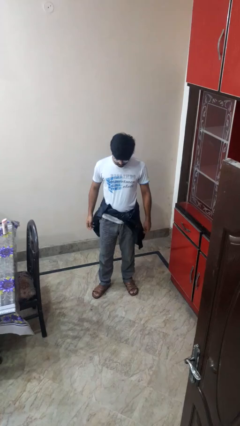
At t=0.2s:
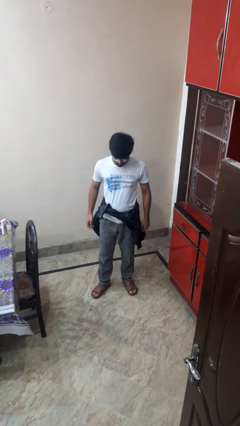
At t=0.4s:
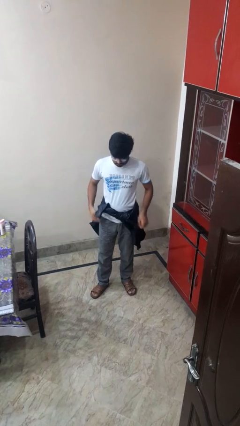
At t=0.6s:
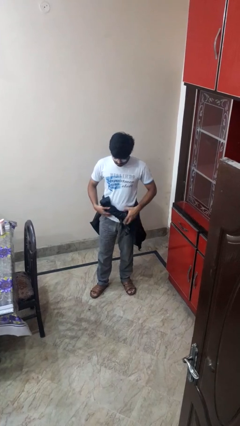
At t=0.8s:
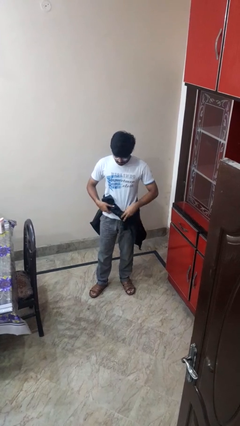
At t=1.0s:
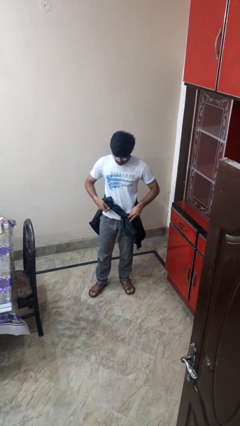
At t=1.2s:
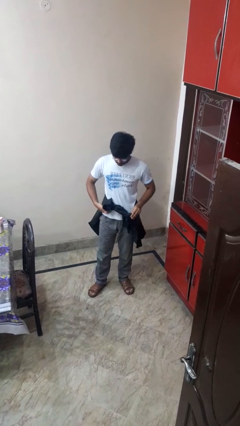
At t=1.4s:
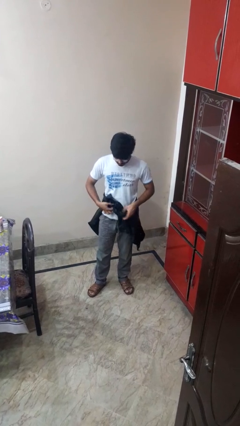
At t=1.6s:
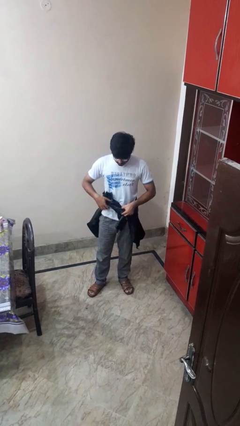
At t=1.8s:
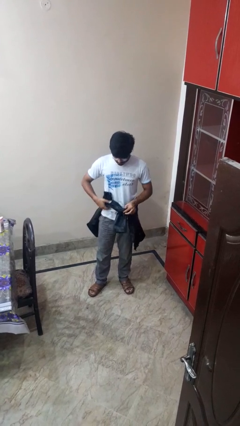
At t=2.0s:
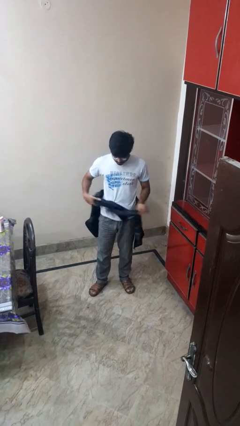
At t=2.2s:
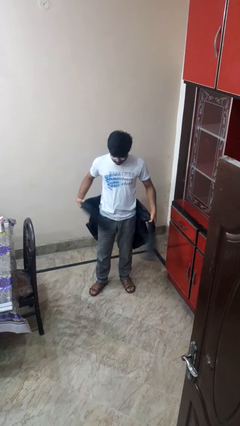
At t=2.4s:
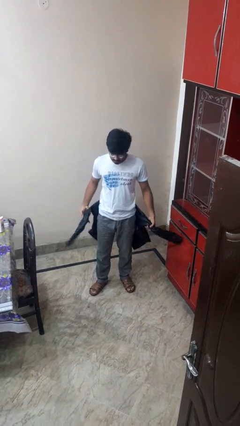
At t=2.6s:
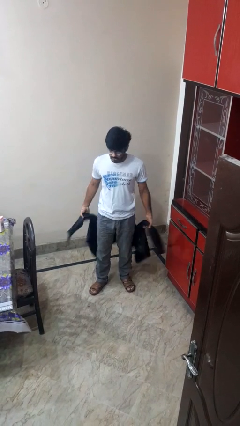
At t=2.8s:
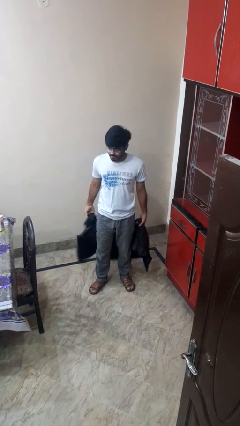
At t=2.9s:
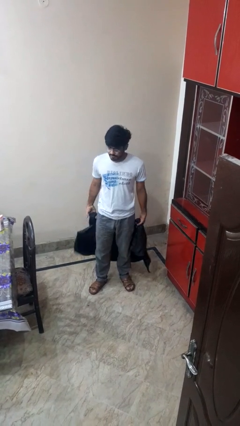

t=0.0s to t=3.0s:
person unties jacket around waist

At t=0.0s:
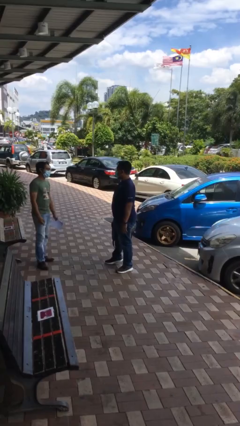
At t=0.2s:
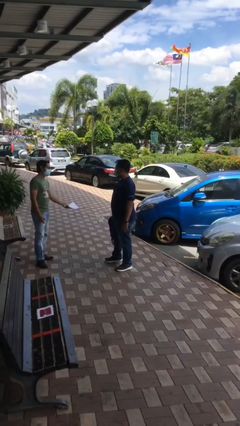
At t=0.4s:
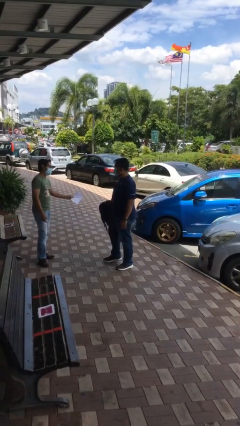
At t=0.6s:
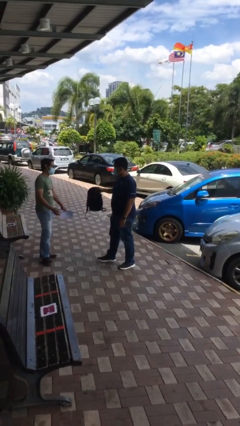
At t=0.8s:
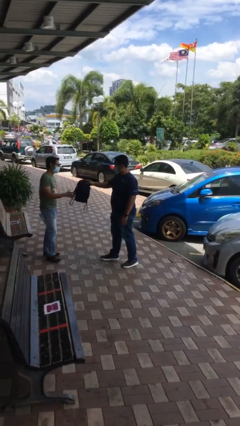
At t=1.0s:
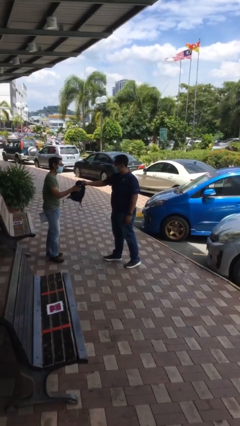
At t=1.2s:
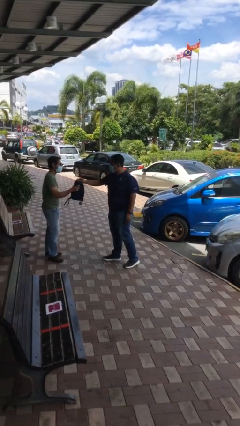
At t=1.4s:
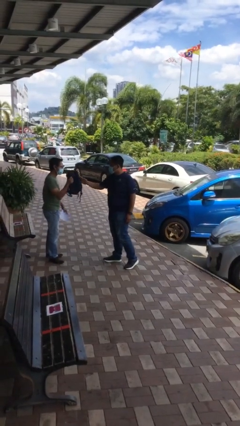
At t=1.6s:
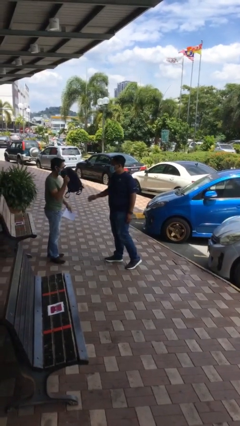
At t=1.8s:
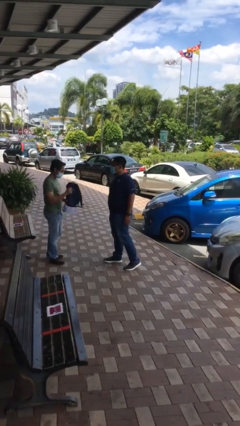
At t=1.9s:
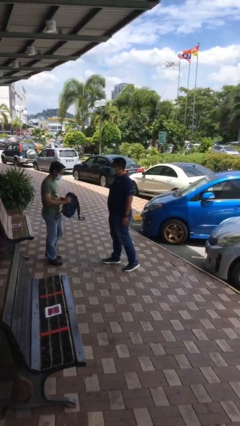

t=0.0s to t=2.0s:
person transfers object to person

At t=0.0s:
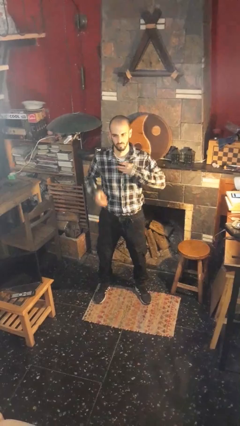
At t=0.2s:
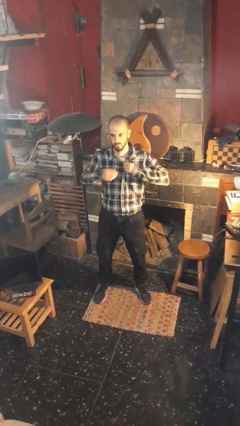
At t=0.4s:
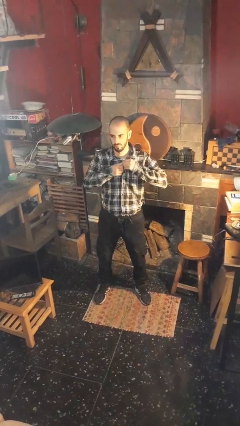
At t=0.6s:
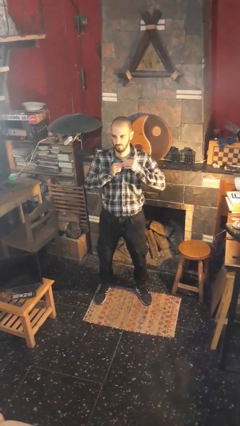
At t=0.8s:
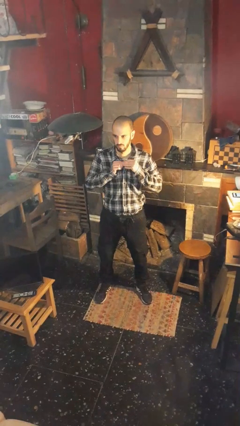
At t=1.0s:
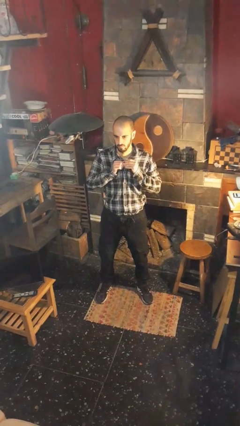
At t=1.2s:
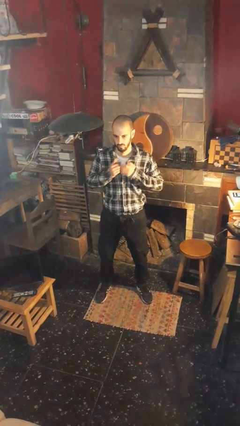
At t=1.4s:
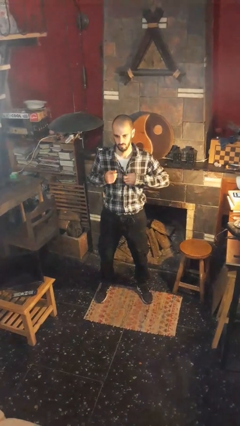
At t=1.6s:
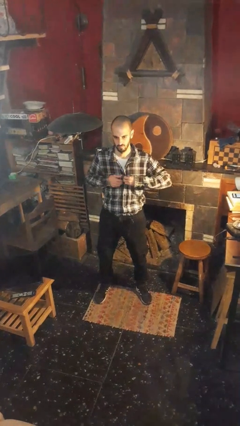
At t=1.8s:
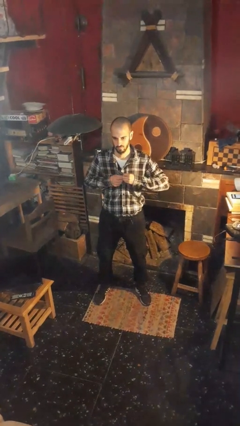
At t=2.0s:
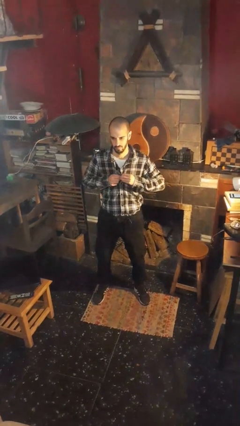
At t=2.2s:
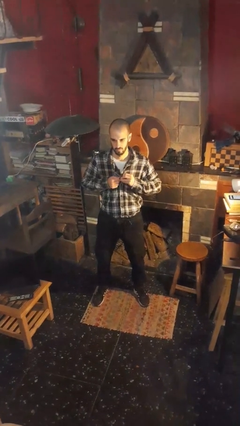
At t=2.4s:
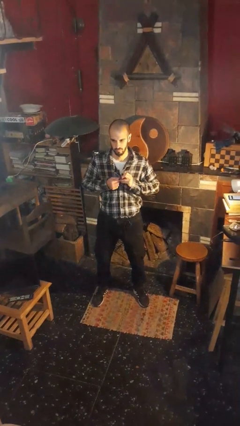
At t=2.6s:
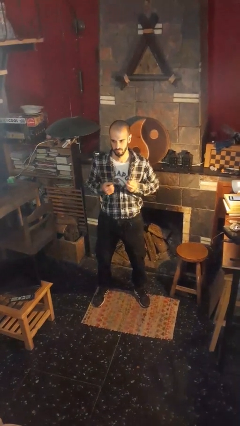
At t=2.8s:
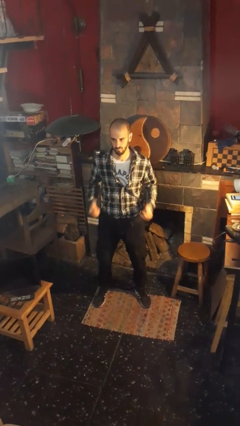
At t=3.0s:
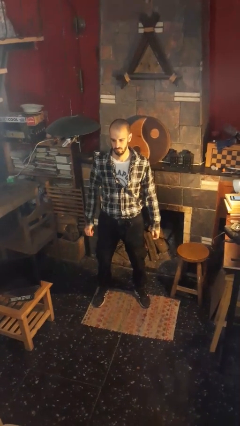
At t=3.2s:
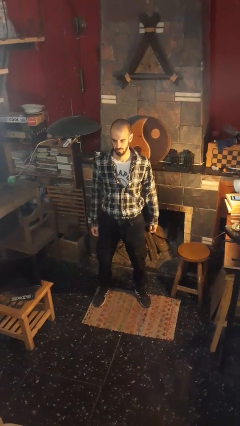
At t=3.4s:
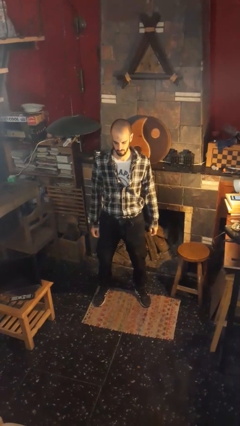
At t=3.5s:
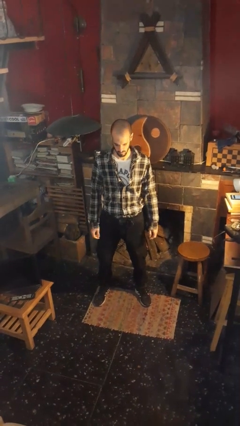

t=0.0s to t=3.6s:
person unbuttons shirt

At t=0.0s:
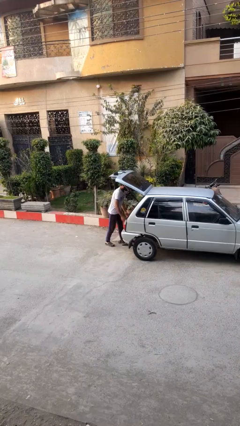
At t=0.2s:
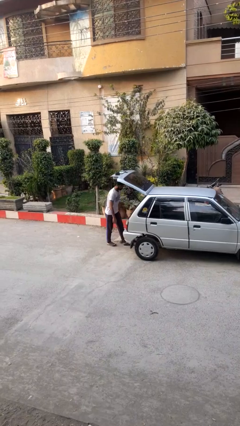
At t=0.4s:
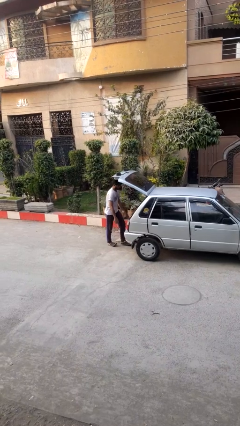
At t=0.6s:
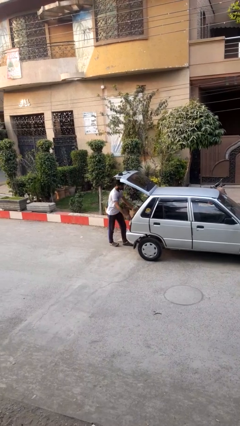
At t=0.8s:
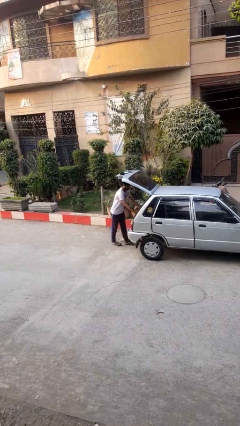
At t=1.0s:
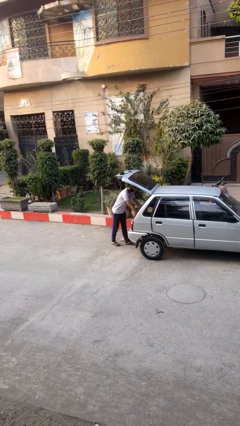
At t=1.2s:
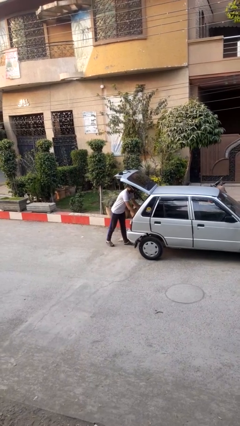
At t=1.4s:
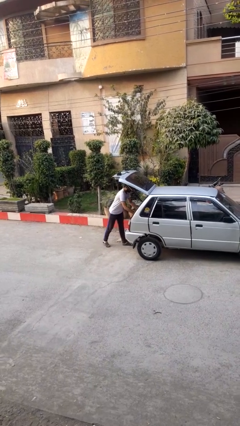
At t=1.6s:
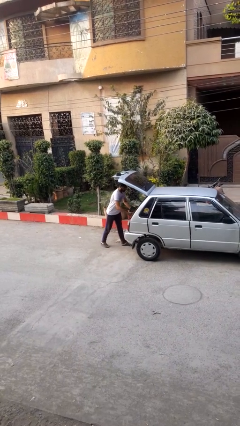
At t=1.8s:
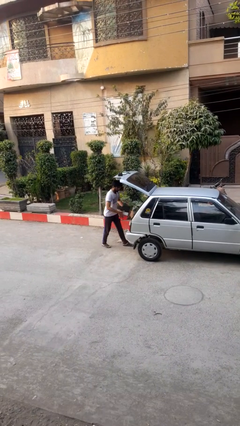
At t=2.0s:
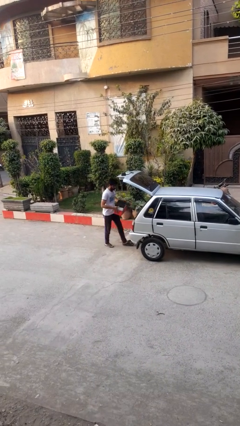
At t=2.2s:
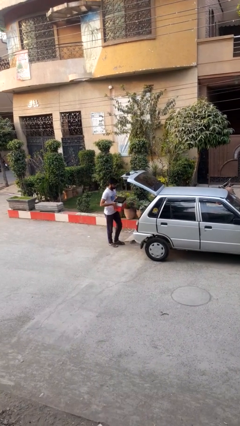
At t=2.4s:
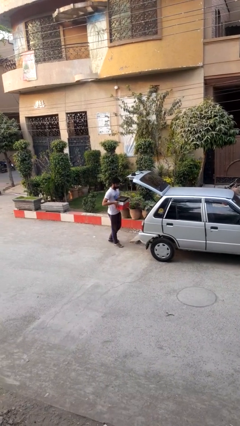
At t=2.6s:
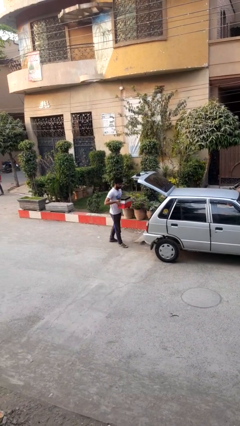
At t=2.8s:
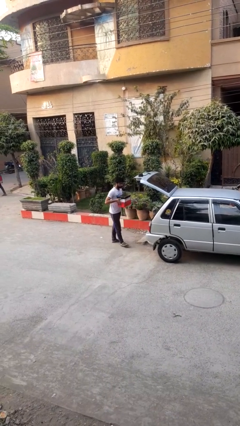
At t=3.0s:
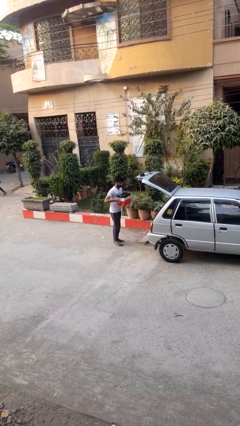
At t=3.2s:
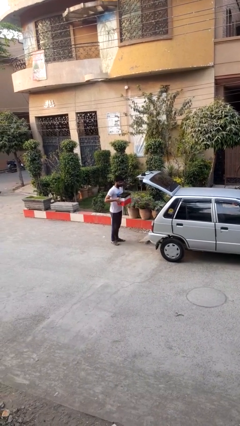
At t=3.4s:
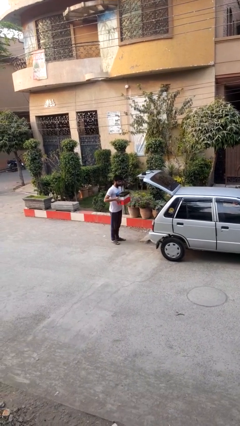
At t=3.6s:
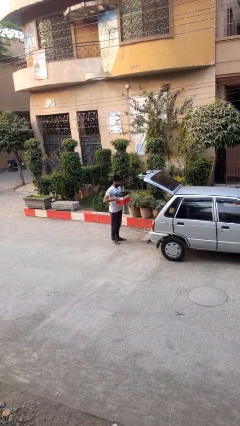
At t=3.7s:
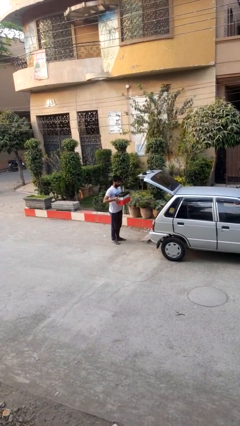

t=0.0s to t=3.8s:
person unloads car

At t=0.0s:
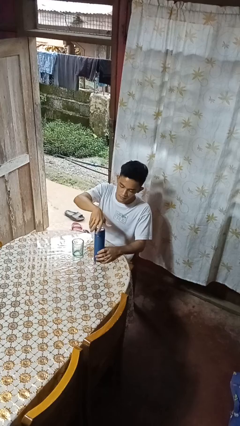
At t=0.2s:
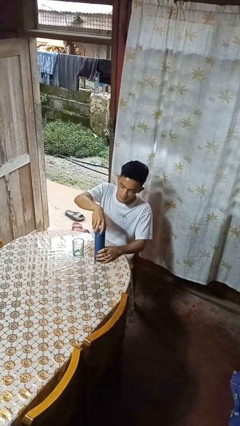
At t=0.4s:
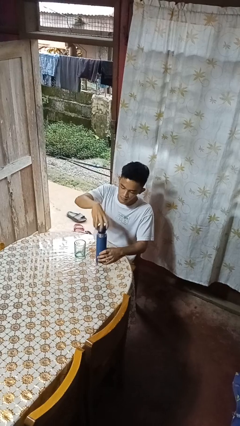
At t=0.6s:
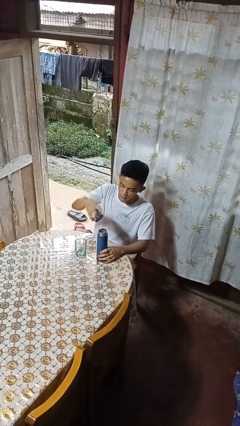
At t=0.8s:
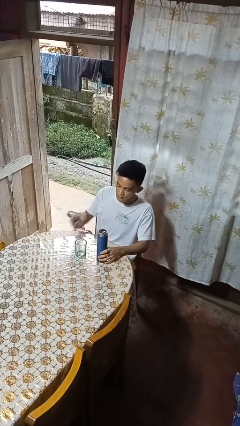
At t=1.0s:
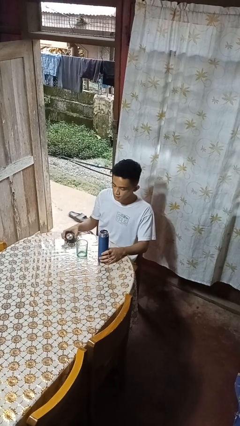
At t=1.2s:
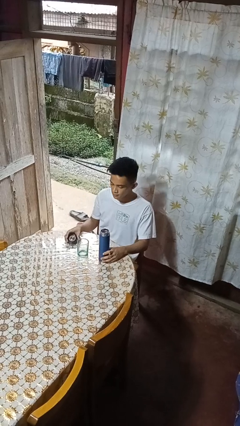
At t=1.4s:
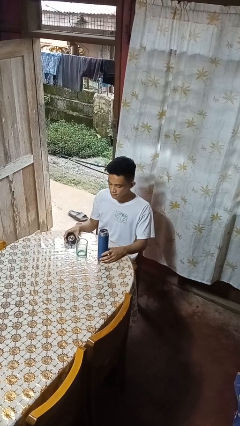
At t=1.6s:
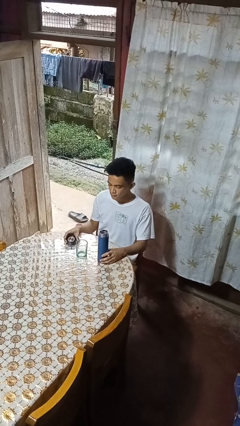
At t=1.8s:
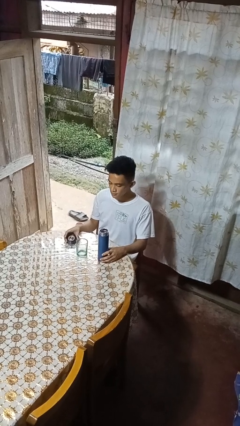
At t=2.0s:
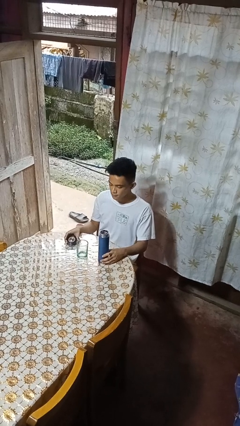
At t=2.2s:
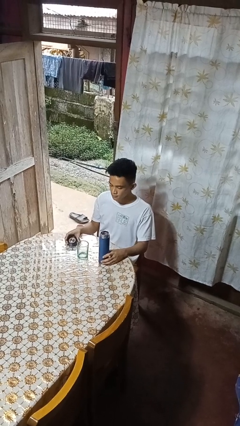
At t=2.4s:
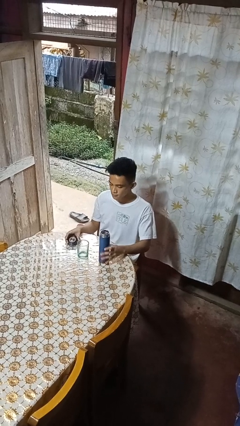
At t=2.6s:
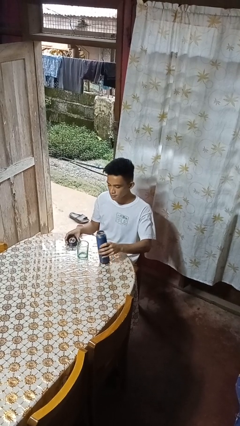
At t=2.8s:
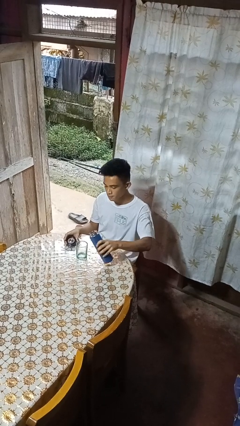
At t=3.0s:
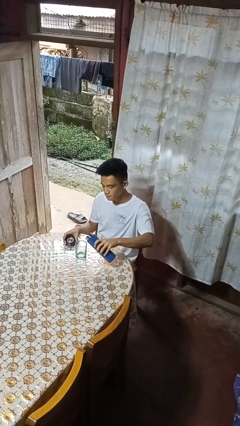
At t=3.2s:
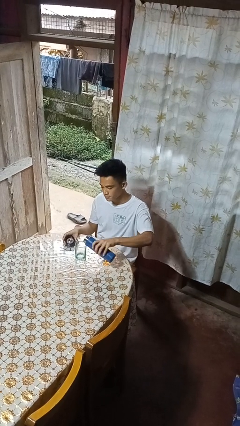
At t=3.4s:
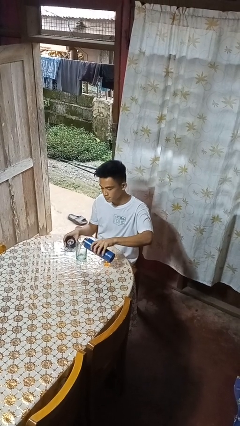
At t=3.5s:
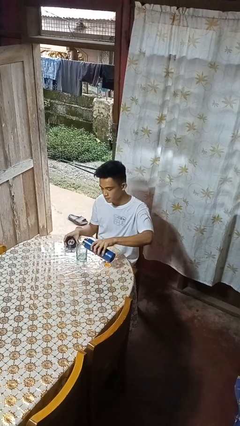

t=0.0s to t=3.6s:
person unscrews lid from bottle

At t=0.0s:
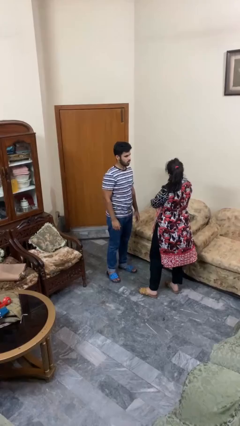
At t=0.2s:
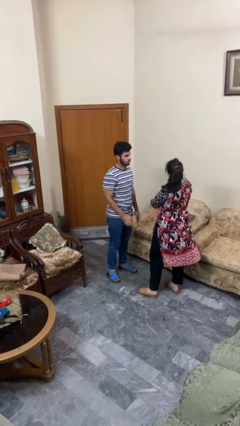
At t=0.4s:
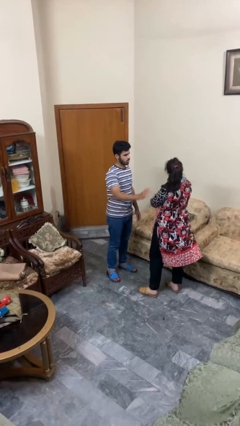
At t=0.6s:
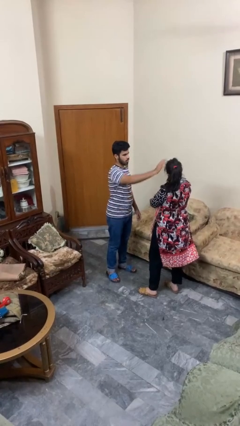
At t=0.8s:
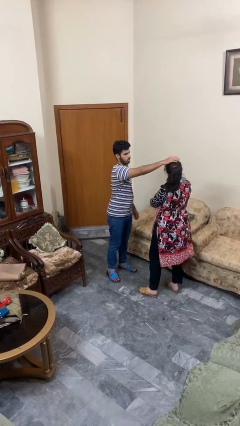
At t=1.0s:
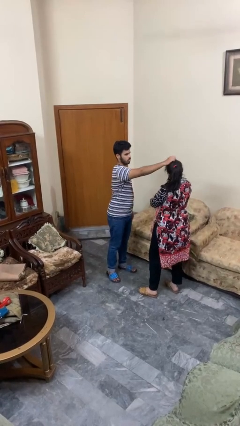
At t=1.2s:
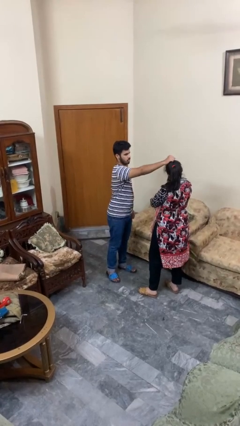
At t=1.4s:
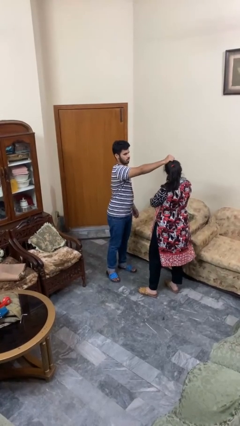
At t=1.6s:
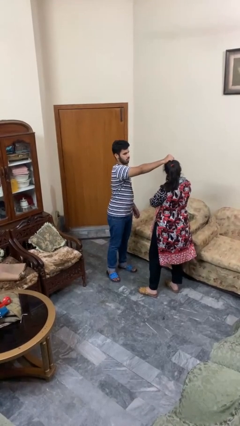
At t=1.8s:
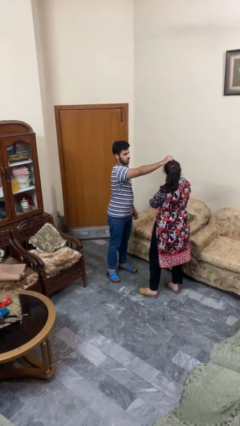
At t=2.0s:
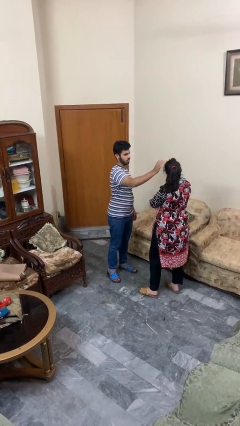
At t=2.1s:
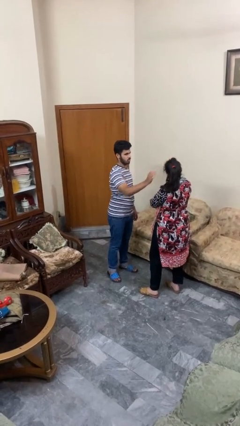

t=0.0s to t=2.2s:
person grabs person by hair
